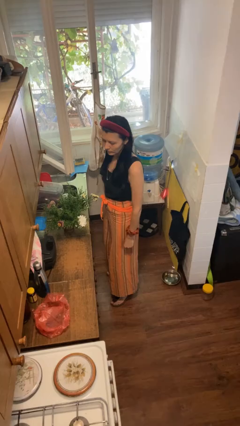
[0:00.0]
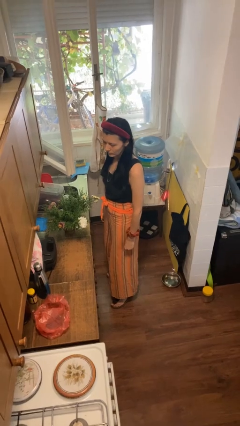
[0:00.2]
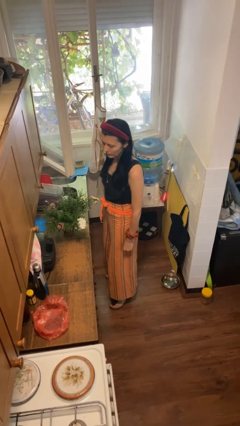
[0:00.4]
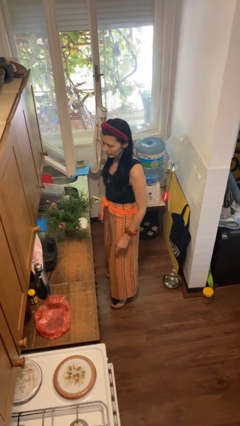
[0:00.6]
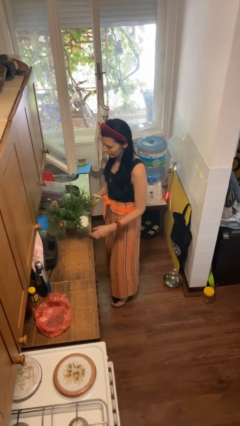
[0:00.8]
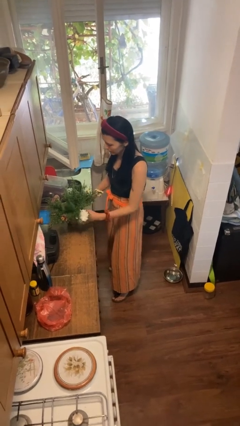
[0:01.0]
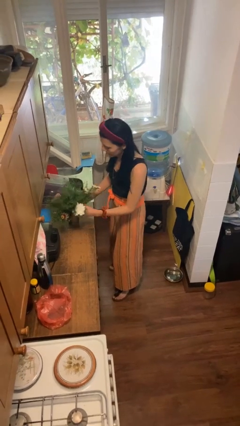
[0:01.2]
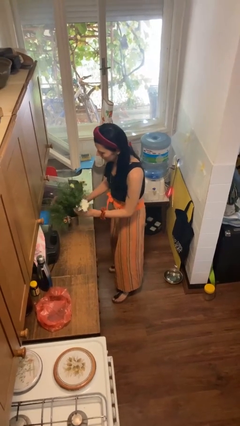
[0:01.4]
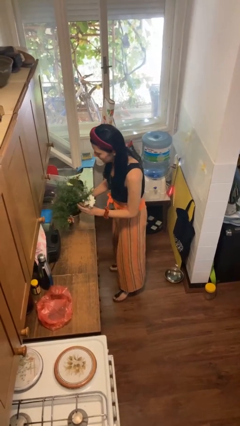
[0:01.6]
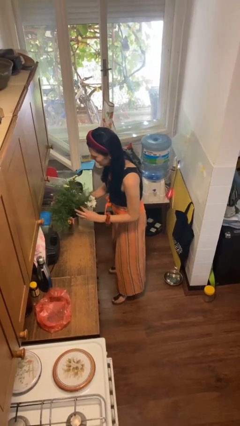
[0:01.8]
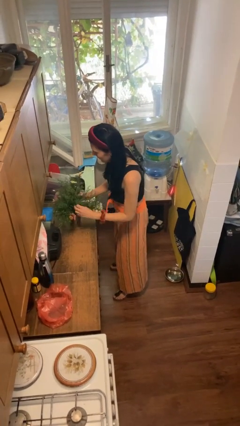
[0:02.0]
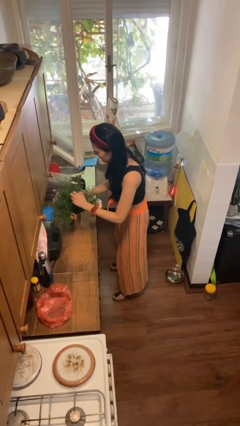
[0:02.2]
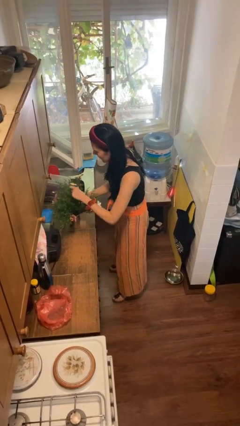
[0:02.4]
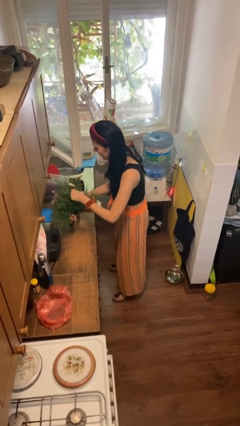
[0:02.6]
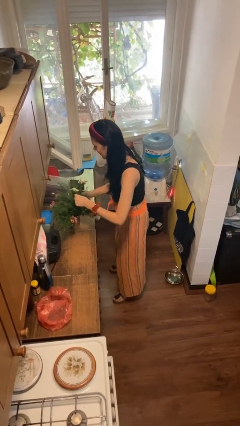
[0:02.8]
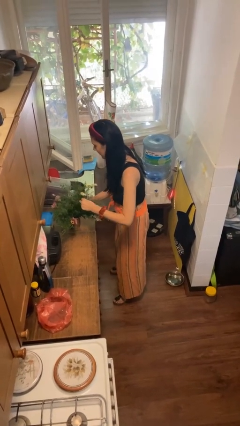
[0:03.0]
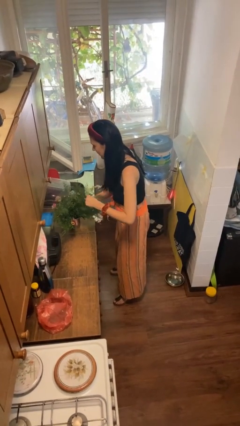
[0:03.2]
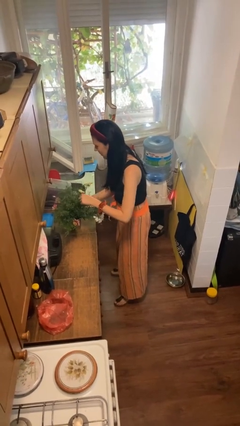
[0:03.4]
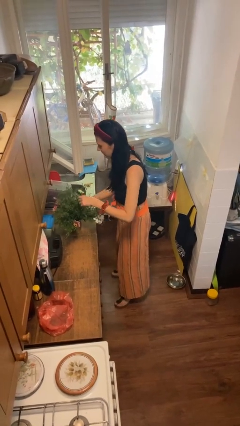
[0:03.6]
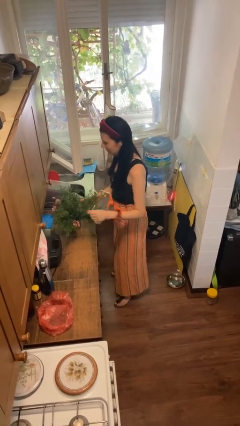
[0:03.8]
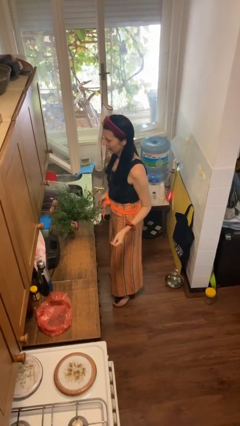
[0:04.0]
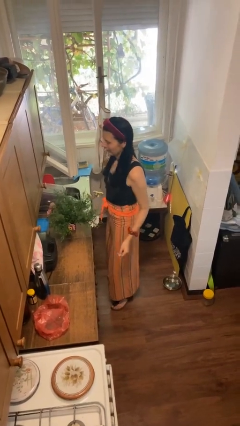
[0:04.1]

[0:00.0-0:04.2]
person arranges flowers in vase

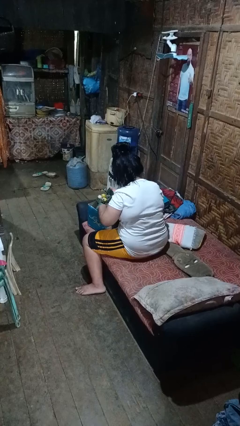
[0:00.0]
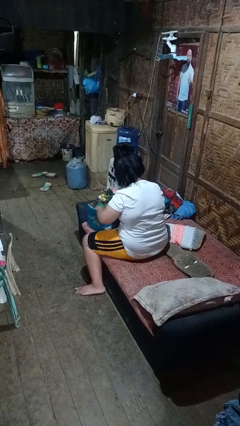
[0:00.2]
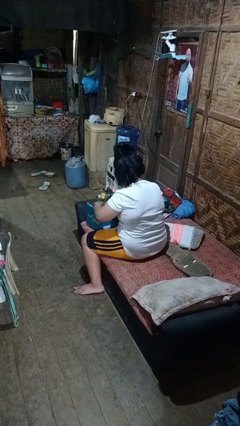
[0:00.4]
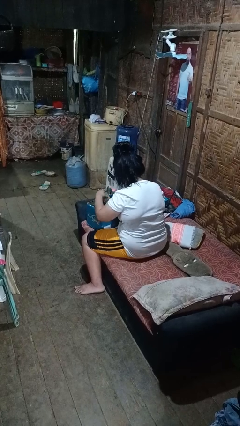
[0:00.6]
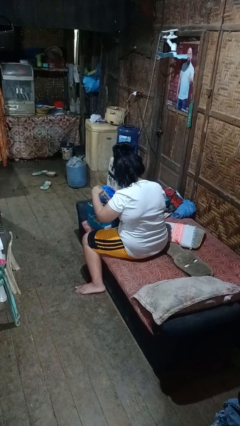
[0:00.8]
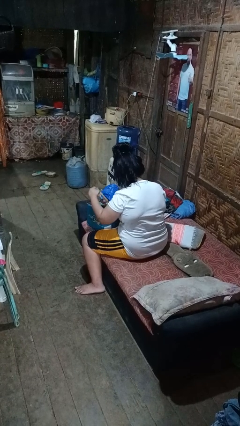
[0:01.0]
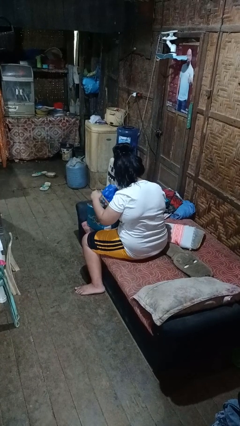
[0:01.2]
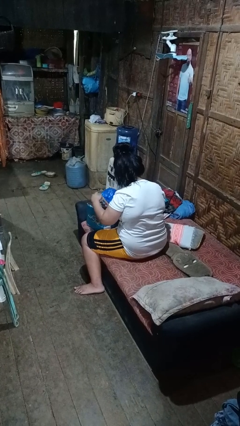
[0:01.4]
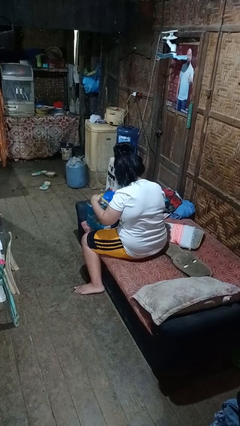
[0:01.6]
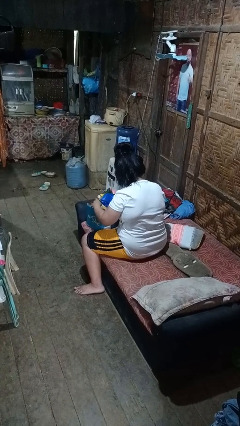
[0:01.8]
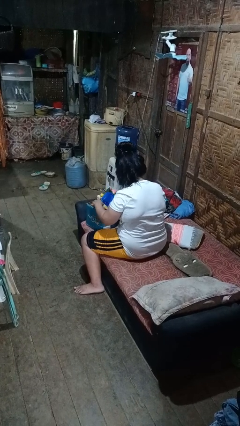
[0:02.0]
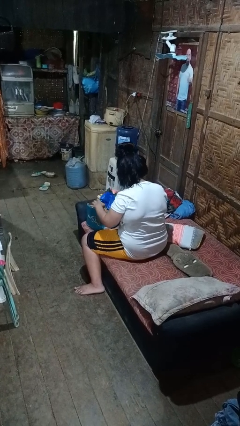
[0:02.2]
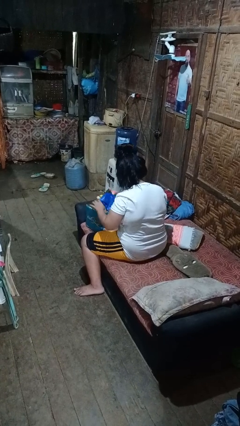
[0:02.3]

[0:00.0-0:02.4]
person searches in box

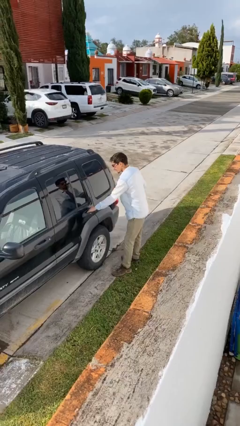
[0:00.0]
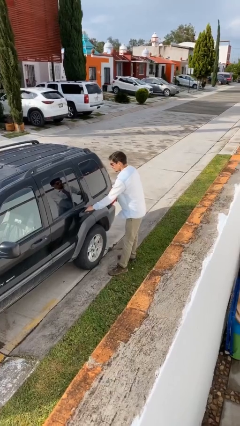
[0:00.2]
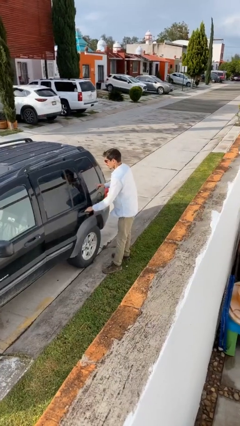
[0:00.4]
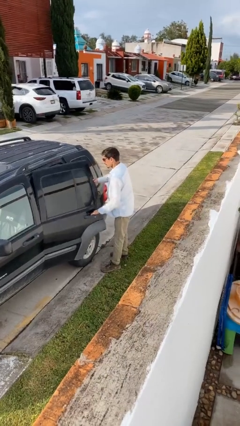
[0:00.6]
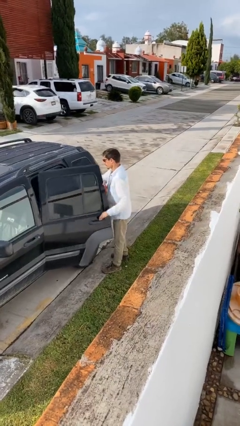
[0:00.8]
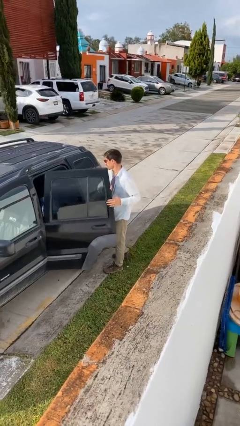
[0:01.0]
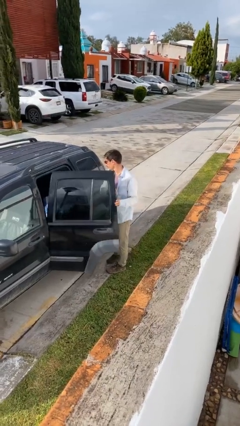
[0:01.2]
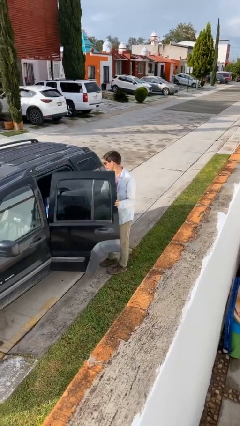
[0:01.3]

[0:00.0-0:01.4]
person opens car door

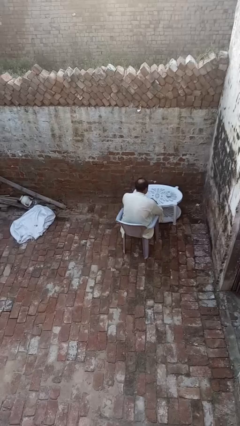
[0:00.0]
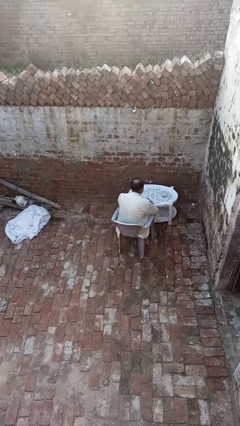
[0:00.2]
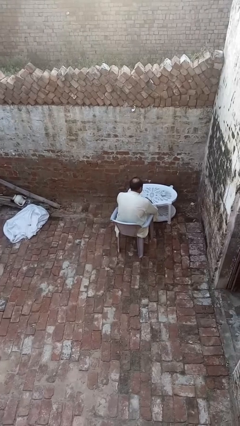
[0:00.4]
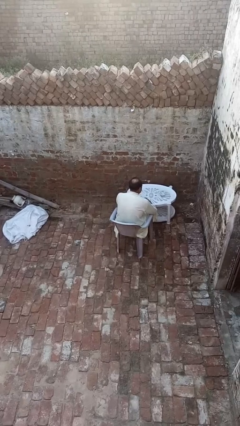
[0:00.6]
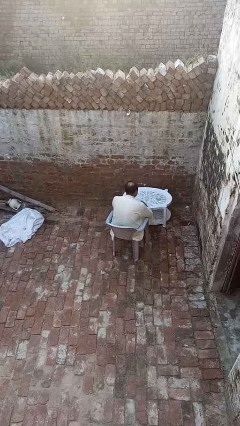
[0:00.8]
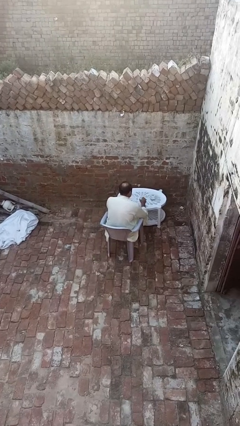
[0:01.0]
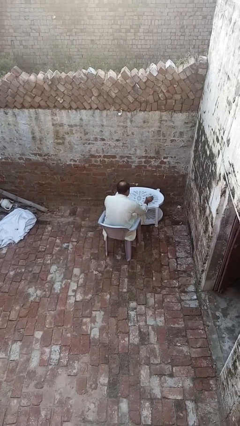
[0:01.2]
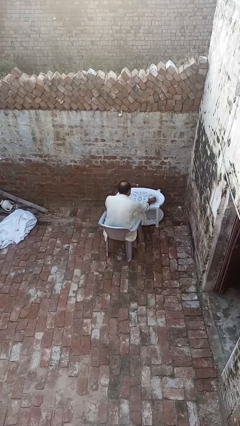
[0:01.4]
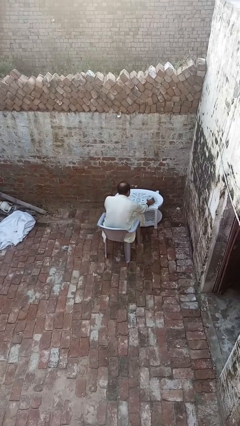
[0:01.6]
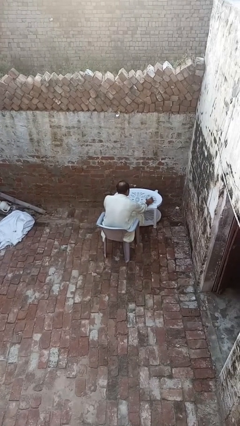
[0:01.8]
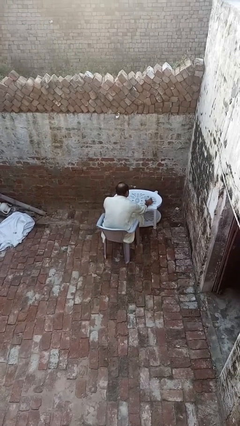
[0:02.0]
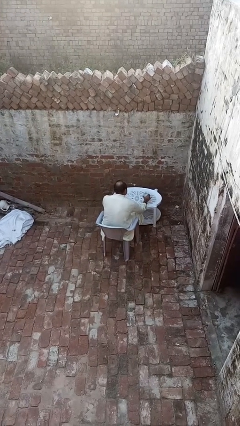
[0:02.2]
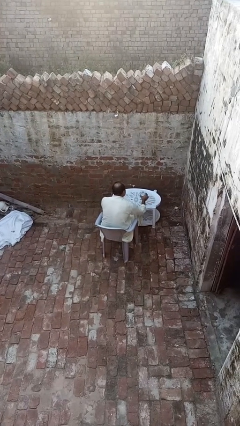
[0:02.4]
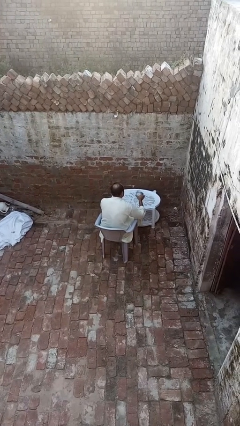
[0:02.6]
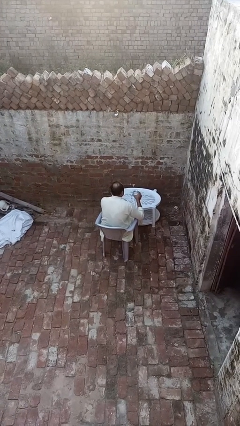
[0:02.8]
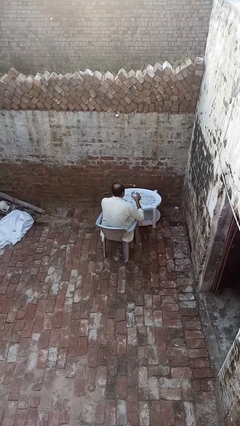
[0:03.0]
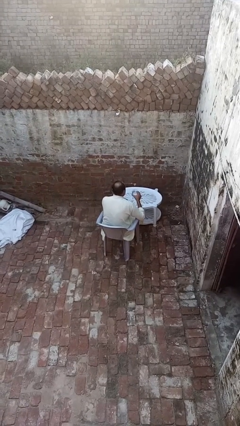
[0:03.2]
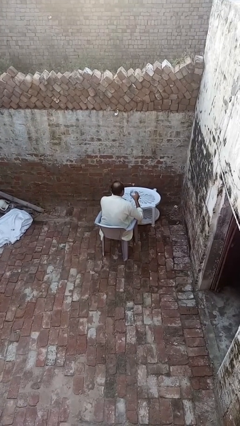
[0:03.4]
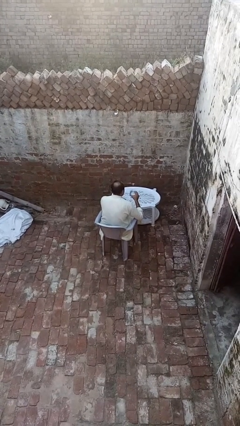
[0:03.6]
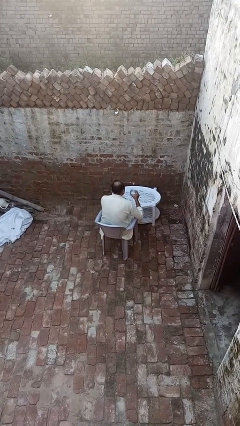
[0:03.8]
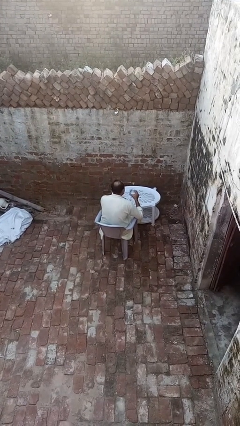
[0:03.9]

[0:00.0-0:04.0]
person picks up object from table

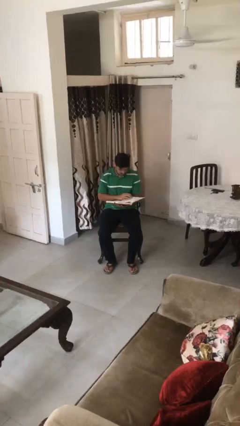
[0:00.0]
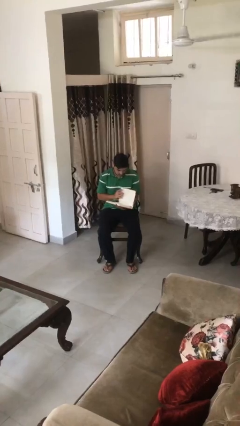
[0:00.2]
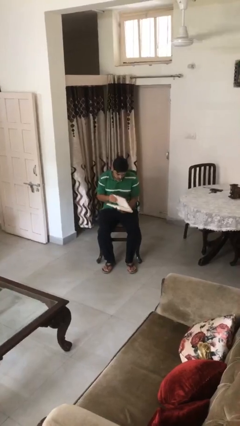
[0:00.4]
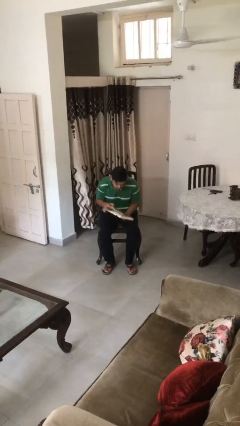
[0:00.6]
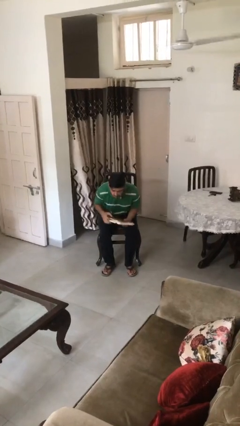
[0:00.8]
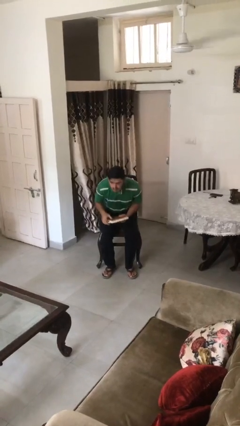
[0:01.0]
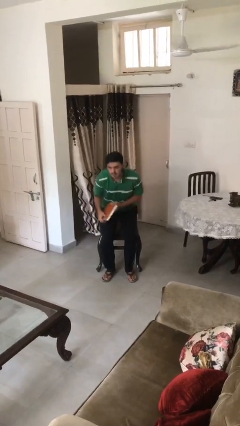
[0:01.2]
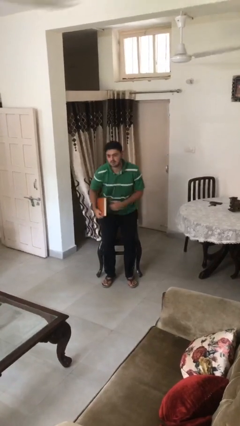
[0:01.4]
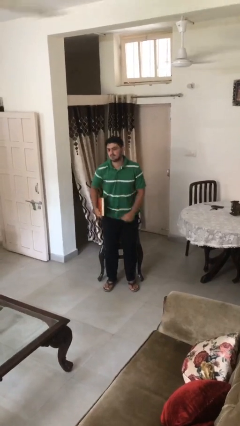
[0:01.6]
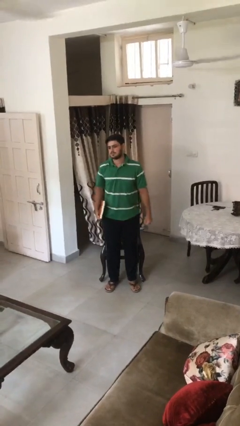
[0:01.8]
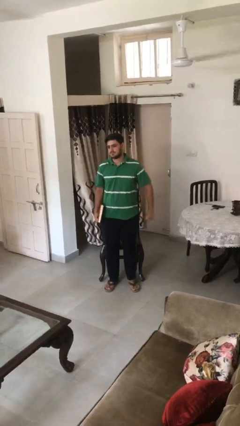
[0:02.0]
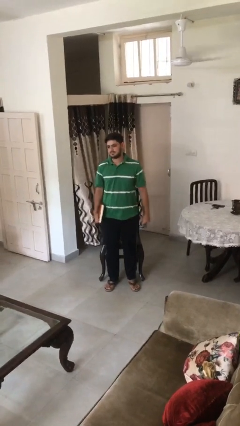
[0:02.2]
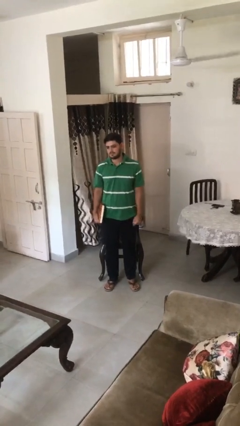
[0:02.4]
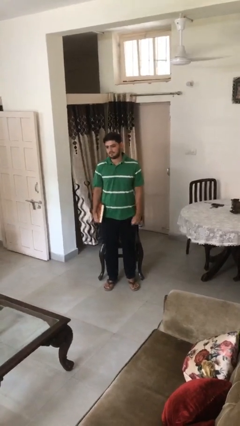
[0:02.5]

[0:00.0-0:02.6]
person stands up

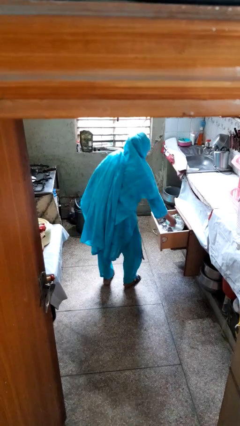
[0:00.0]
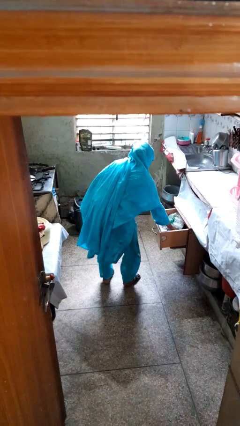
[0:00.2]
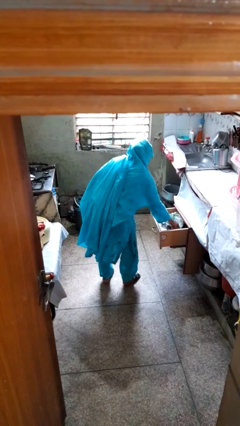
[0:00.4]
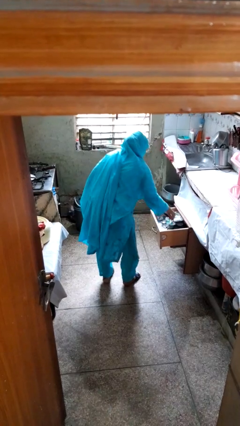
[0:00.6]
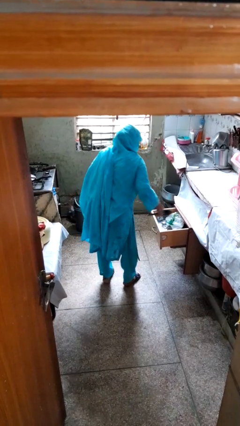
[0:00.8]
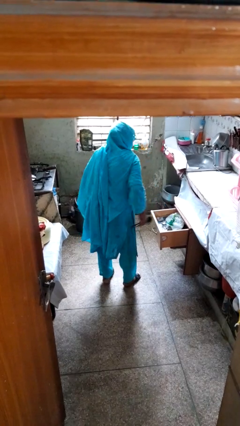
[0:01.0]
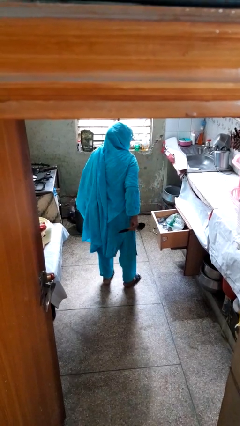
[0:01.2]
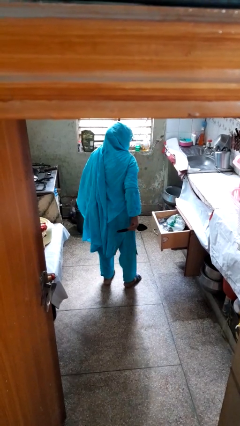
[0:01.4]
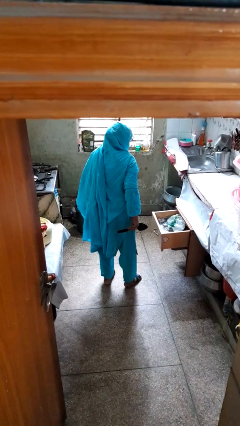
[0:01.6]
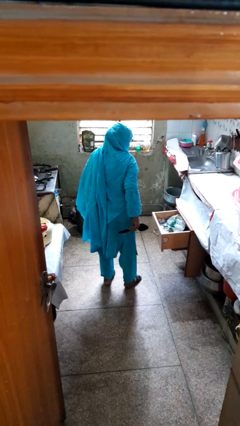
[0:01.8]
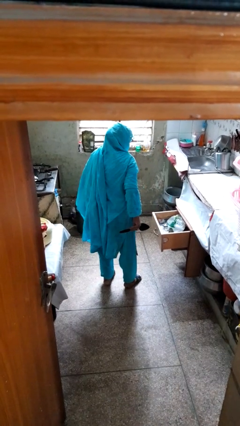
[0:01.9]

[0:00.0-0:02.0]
person takes object from kitchen drawer

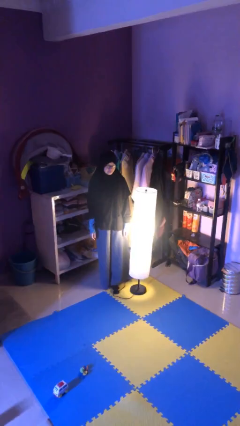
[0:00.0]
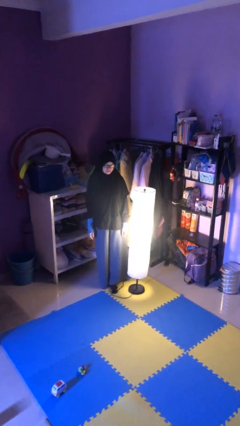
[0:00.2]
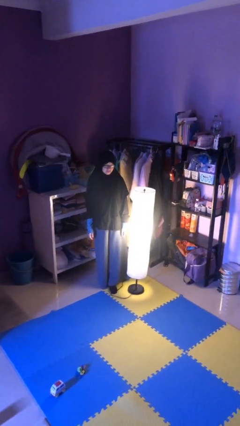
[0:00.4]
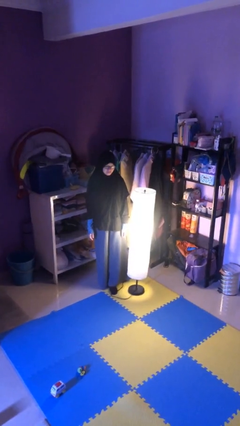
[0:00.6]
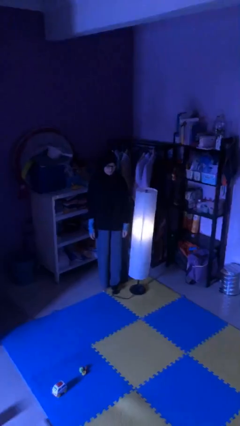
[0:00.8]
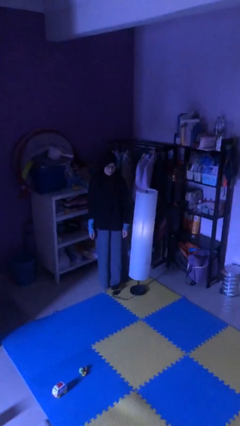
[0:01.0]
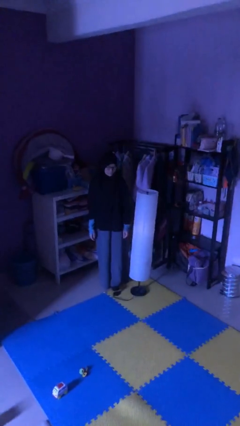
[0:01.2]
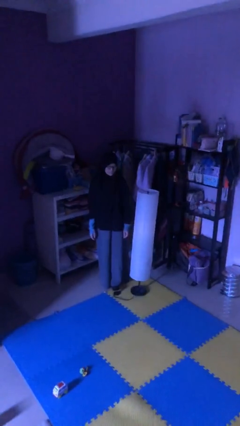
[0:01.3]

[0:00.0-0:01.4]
person turns off lamp
